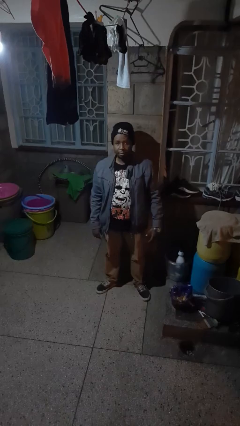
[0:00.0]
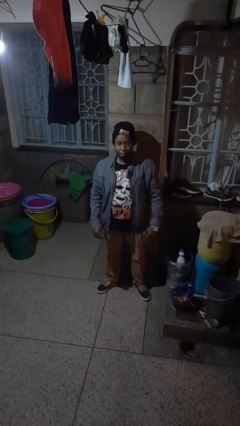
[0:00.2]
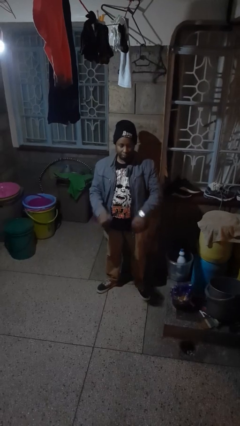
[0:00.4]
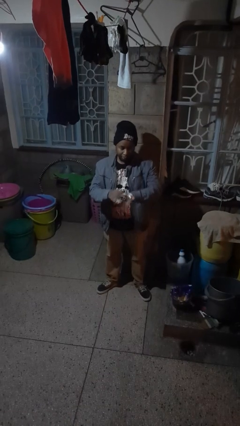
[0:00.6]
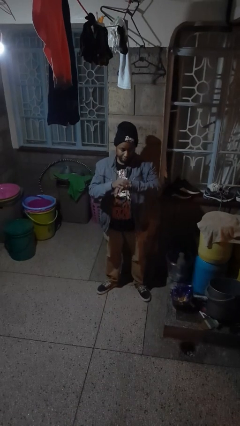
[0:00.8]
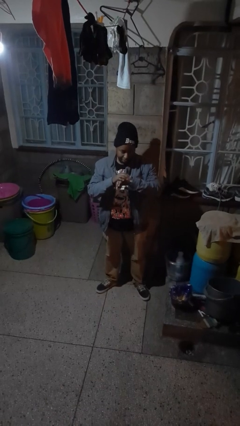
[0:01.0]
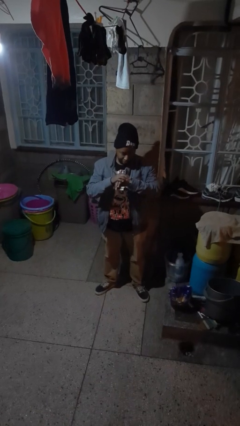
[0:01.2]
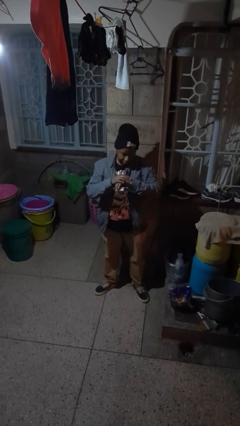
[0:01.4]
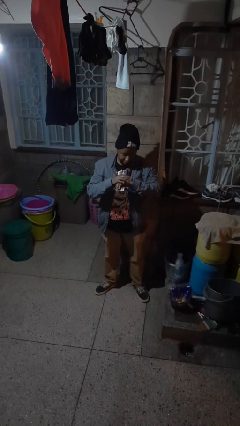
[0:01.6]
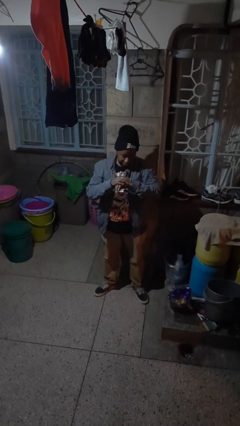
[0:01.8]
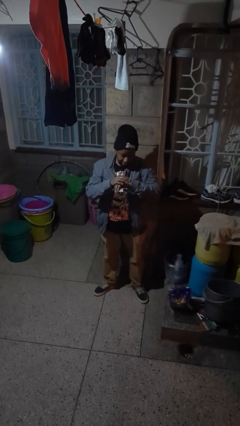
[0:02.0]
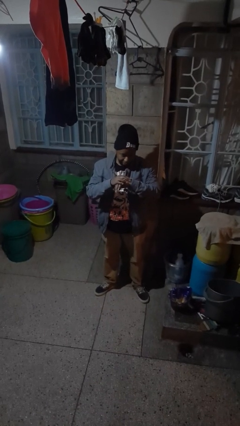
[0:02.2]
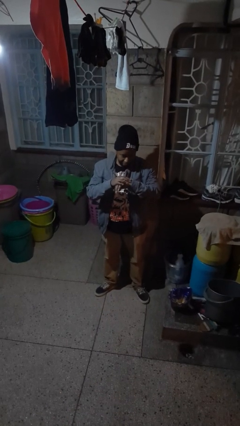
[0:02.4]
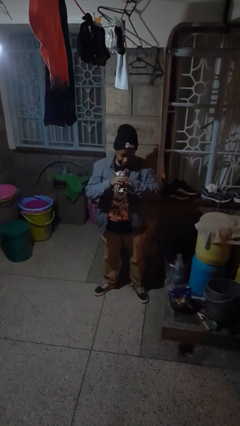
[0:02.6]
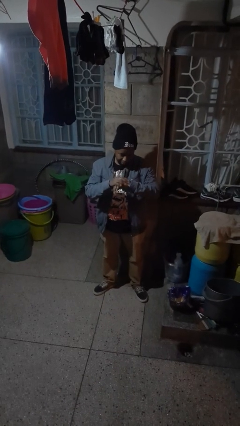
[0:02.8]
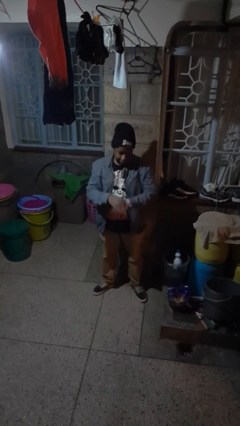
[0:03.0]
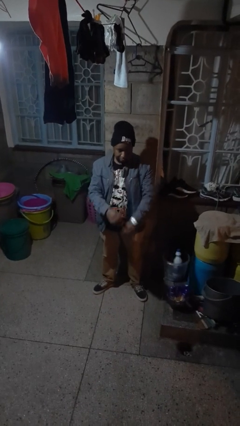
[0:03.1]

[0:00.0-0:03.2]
person looks at wristwatch

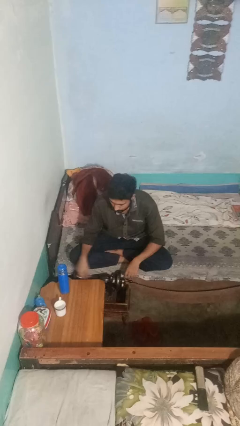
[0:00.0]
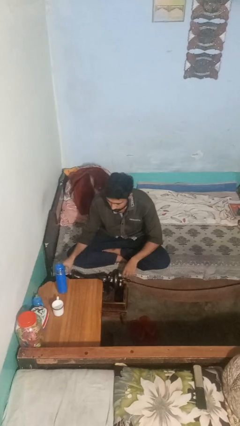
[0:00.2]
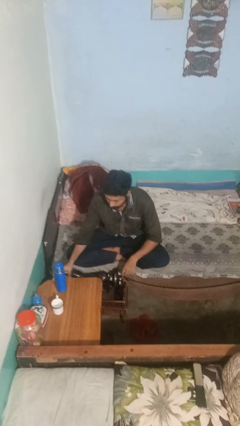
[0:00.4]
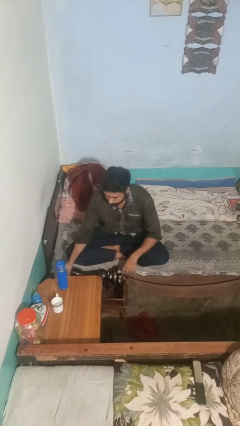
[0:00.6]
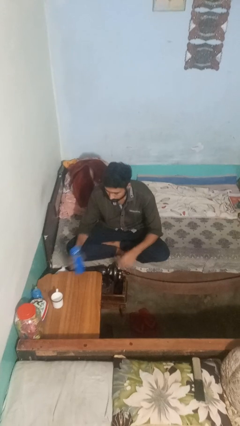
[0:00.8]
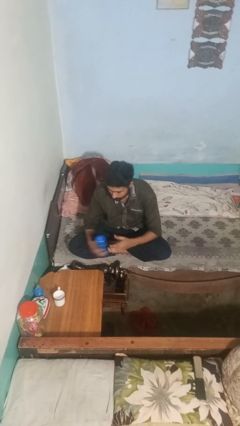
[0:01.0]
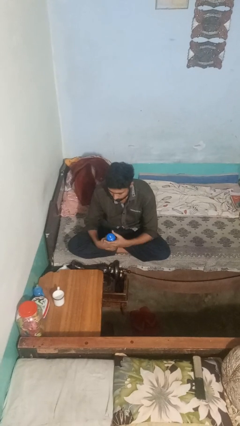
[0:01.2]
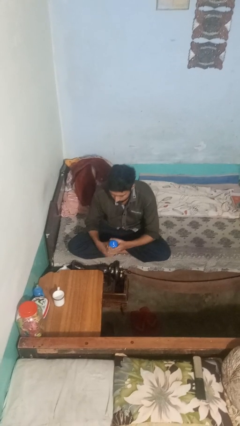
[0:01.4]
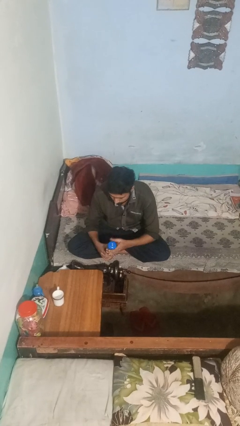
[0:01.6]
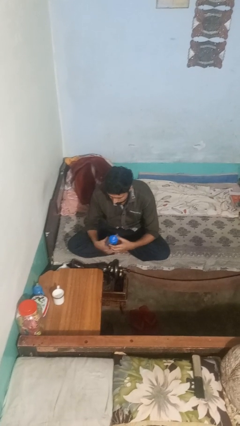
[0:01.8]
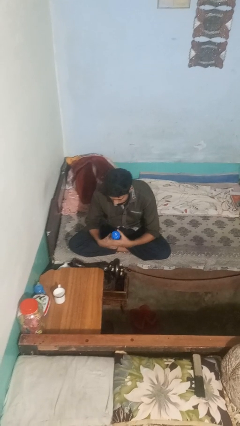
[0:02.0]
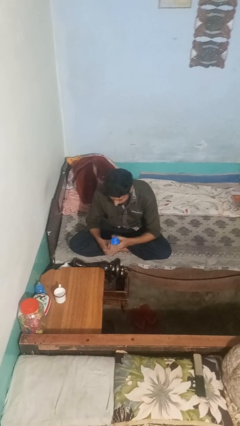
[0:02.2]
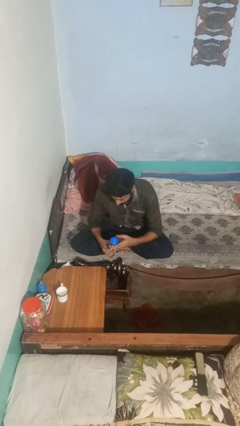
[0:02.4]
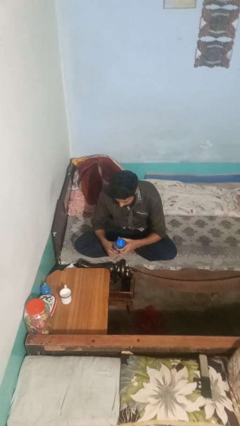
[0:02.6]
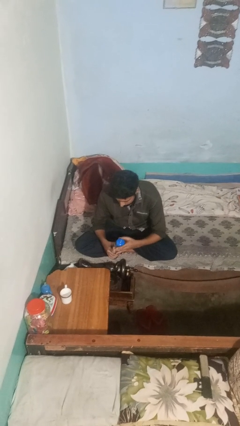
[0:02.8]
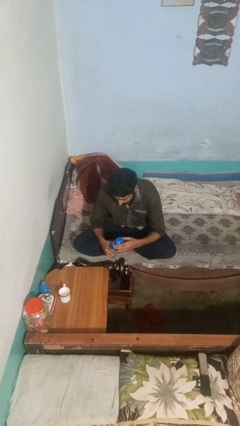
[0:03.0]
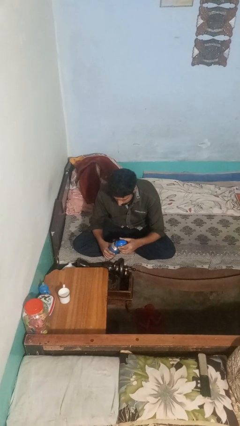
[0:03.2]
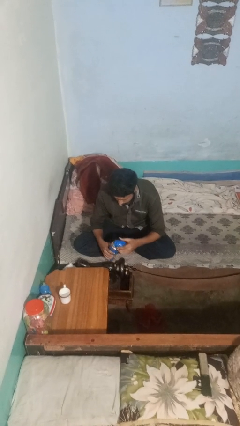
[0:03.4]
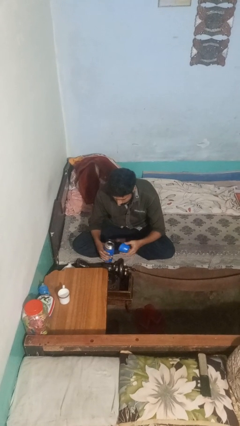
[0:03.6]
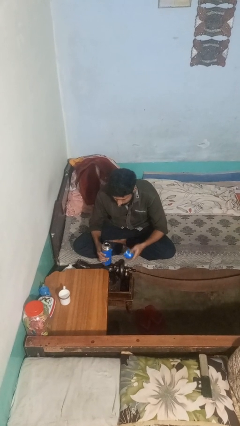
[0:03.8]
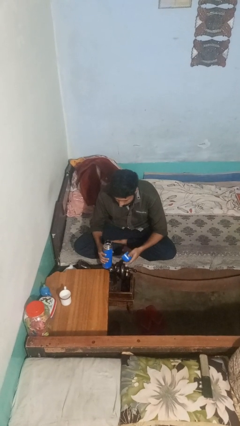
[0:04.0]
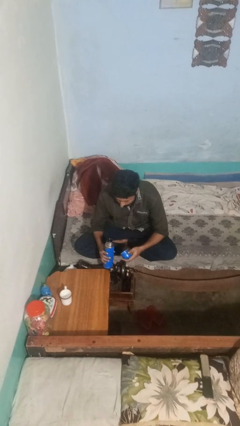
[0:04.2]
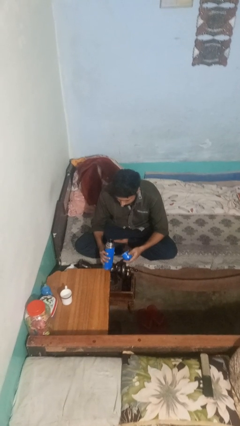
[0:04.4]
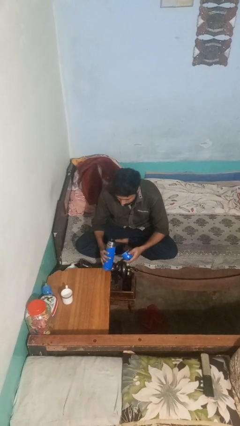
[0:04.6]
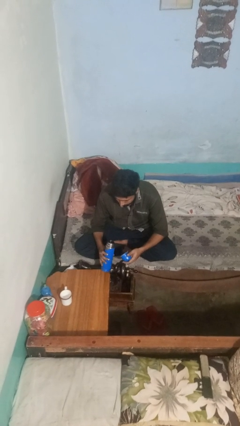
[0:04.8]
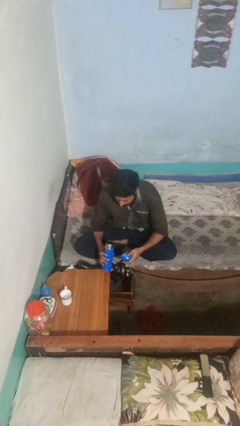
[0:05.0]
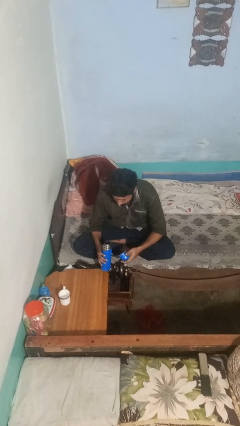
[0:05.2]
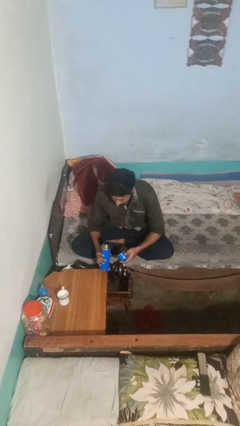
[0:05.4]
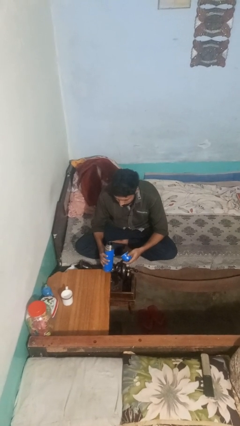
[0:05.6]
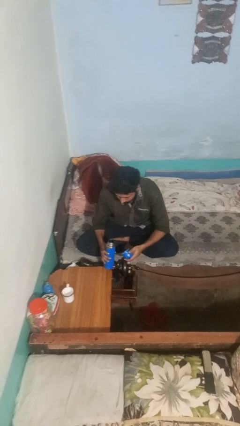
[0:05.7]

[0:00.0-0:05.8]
person unscrews lid from bottle

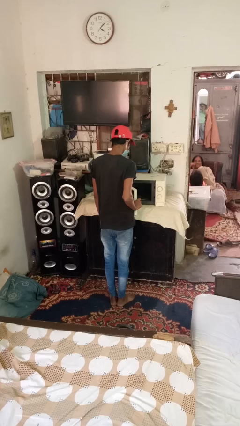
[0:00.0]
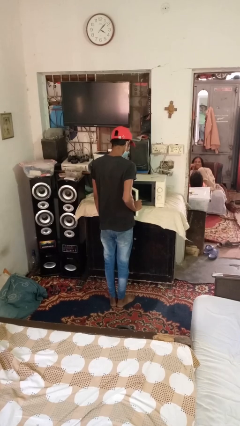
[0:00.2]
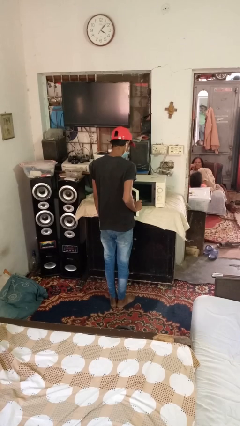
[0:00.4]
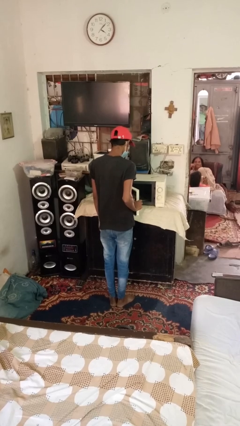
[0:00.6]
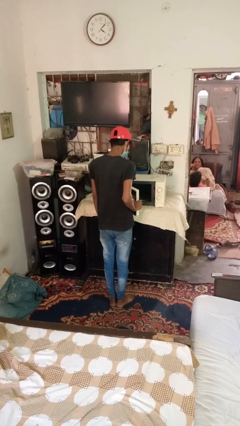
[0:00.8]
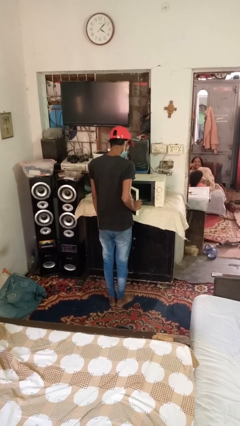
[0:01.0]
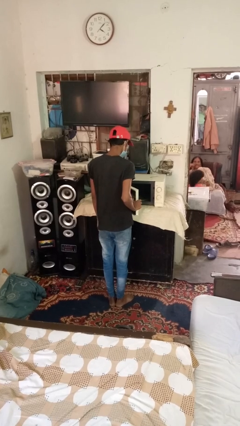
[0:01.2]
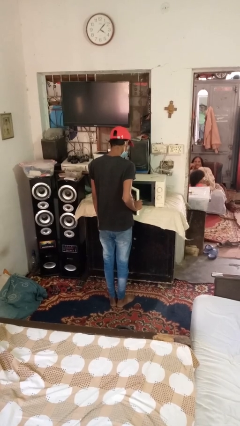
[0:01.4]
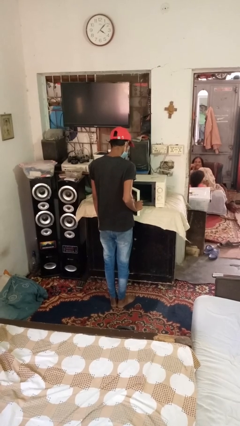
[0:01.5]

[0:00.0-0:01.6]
person opens dishwasher

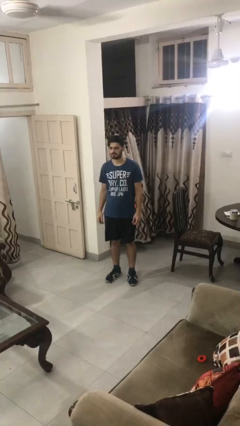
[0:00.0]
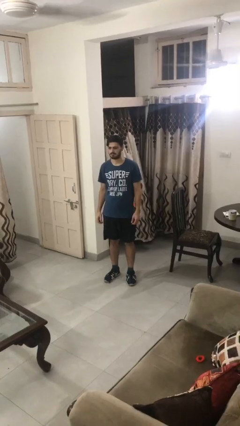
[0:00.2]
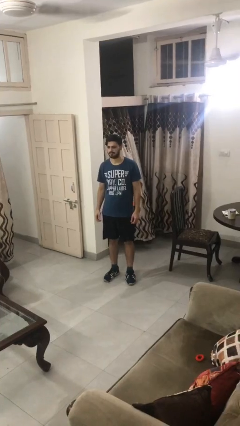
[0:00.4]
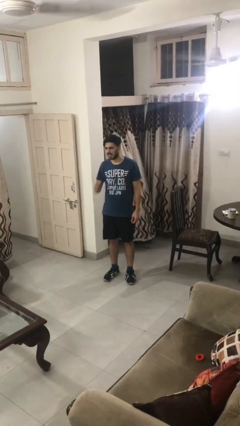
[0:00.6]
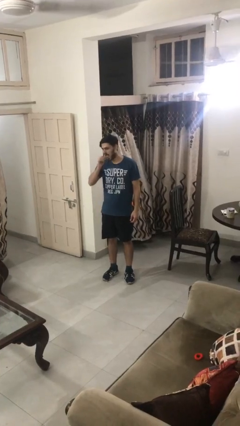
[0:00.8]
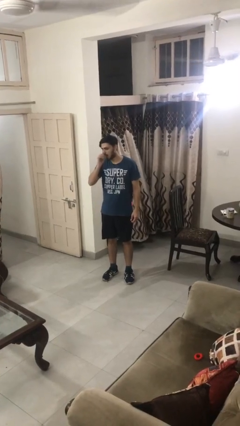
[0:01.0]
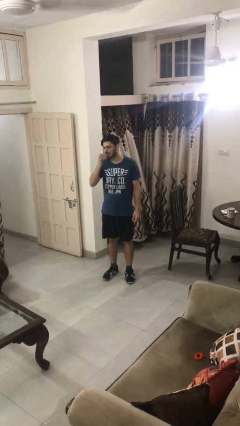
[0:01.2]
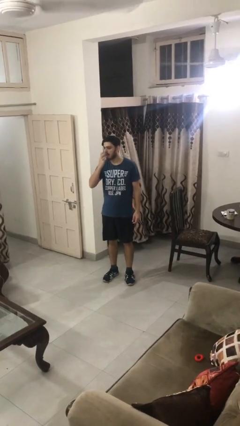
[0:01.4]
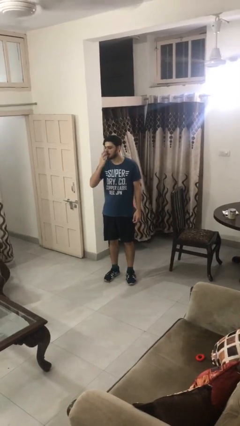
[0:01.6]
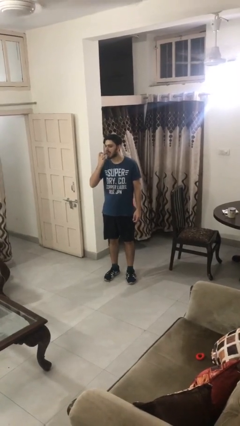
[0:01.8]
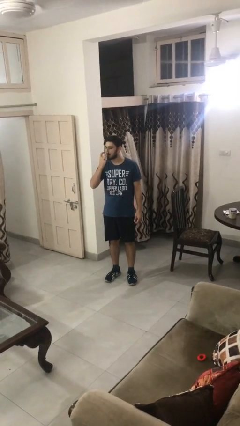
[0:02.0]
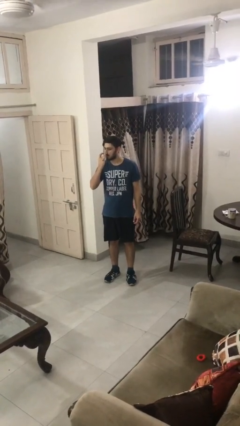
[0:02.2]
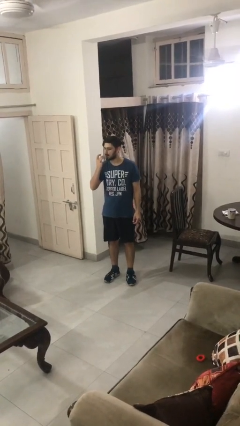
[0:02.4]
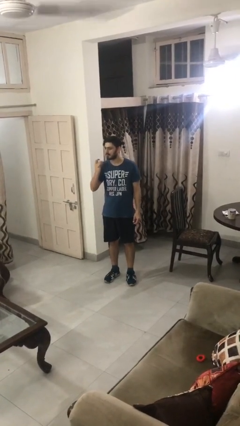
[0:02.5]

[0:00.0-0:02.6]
person licks fingers

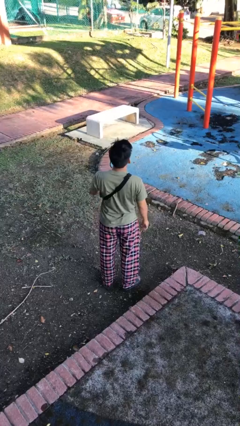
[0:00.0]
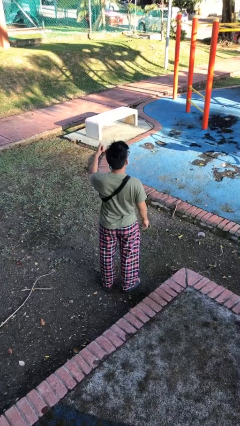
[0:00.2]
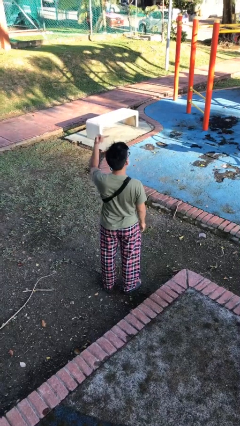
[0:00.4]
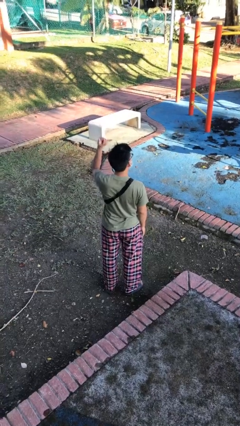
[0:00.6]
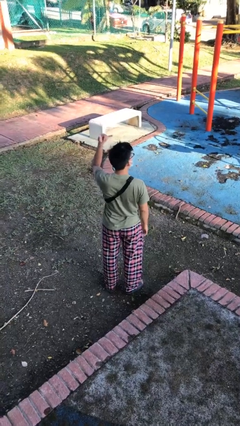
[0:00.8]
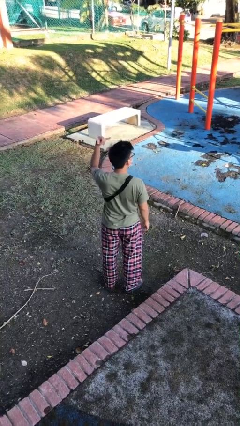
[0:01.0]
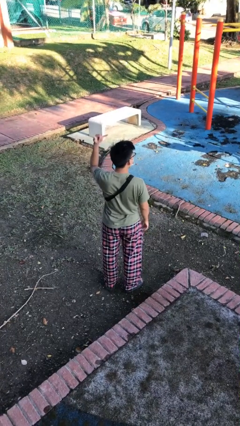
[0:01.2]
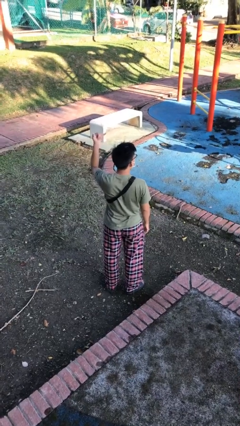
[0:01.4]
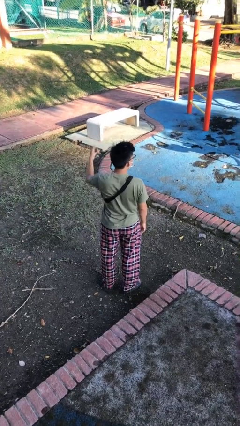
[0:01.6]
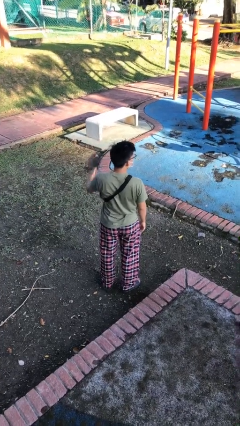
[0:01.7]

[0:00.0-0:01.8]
person gestures hang loose

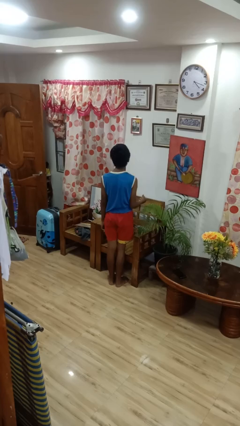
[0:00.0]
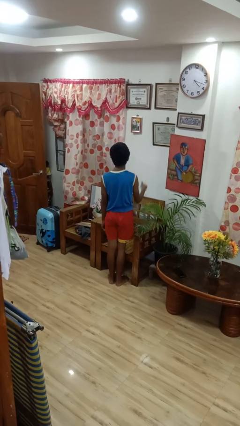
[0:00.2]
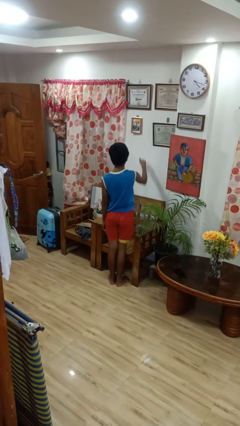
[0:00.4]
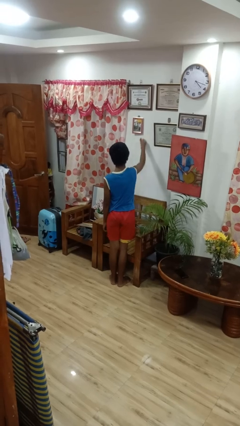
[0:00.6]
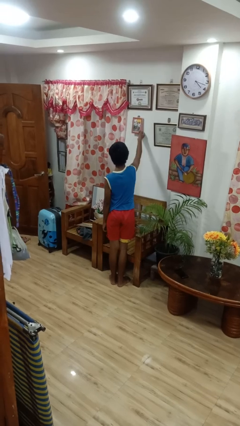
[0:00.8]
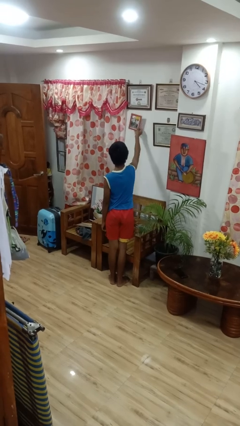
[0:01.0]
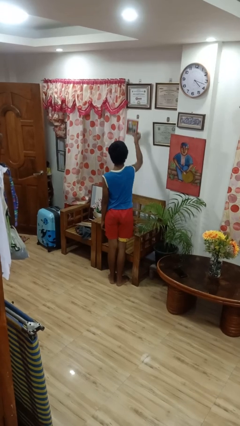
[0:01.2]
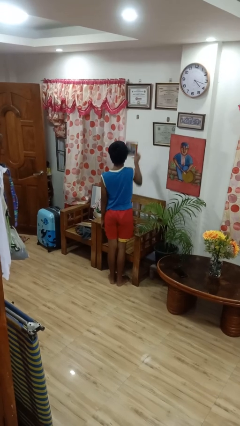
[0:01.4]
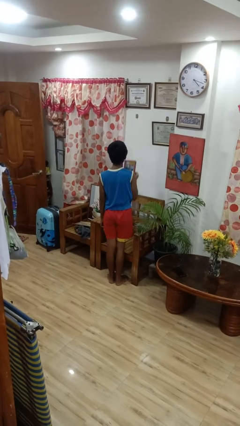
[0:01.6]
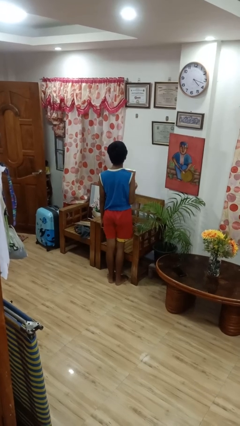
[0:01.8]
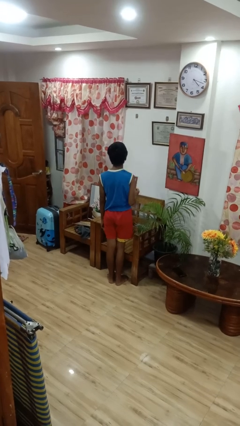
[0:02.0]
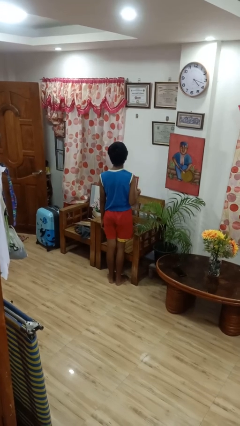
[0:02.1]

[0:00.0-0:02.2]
person takes down picture frame
